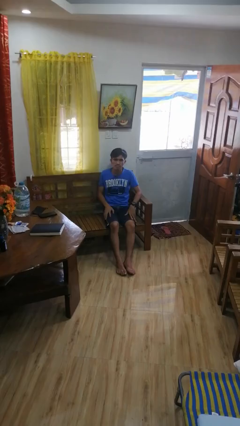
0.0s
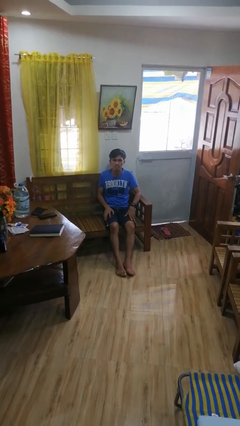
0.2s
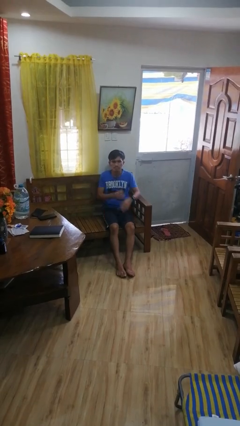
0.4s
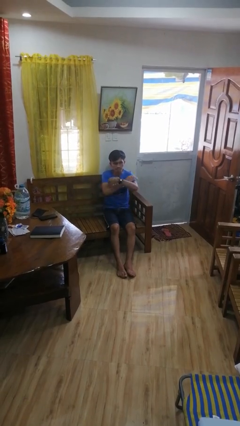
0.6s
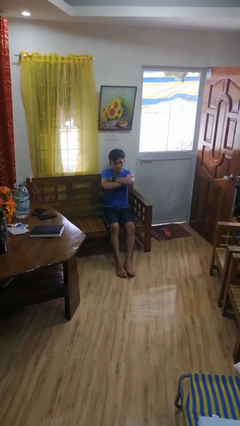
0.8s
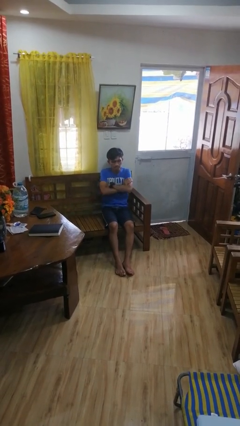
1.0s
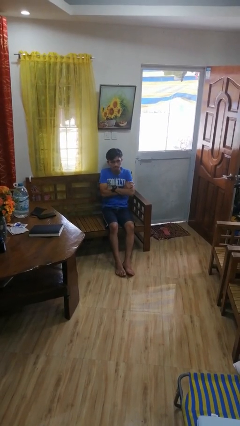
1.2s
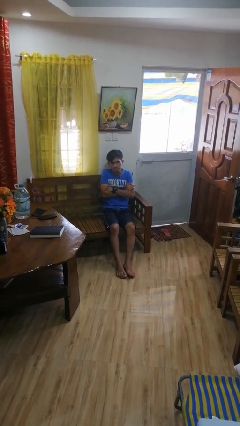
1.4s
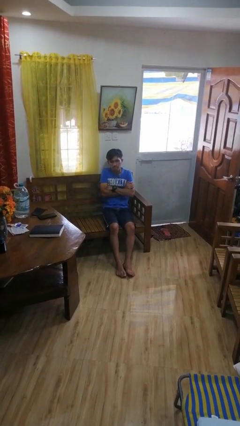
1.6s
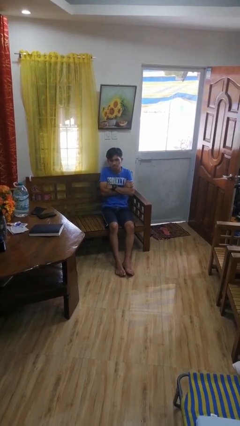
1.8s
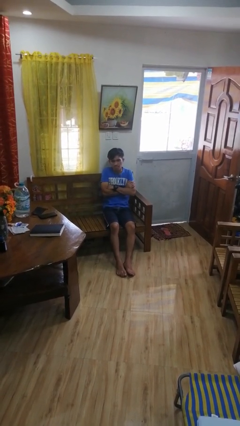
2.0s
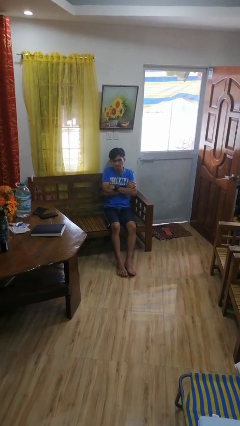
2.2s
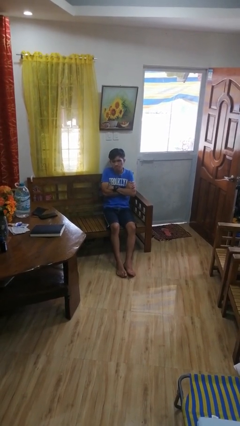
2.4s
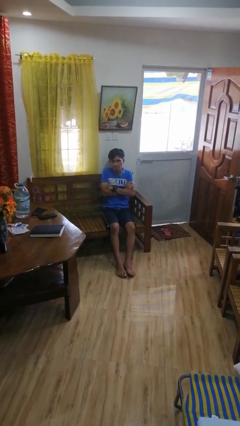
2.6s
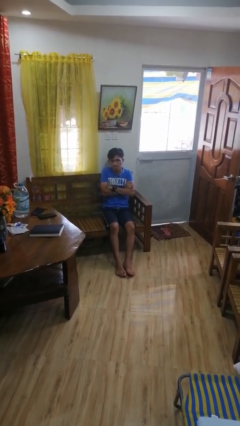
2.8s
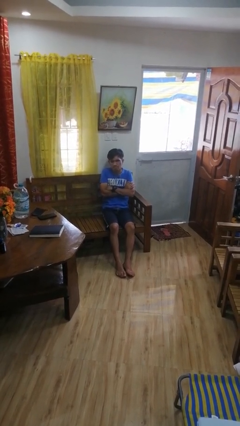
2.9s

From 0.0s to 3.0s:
person crosses arms

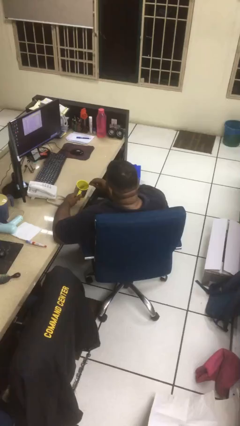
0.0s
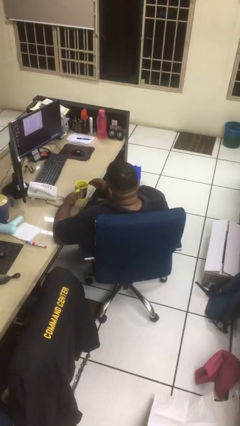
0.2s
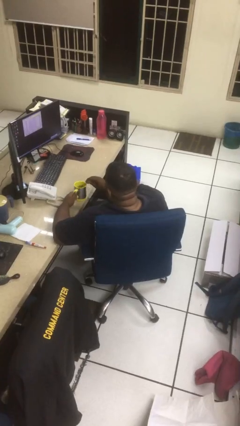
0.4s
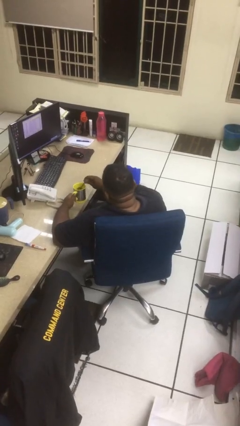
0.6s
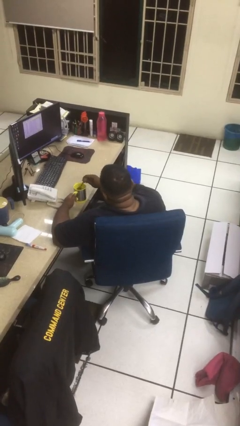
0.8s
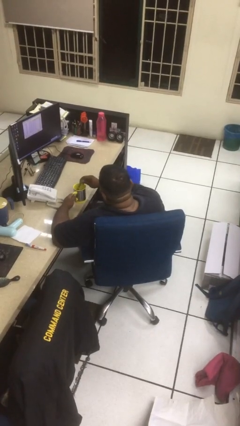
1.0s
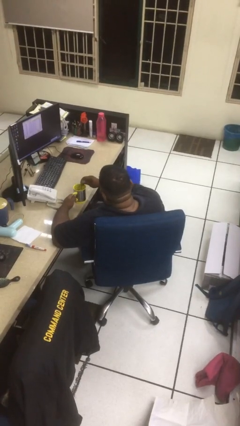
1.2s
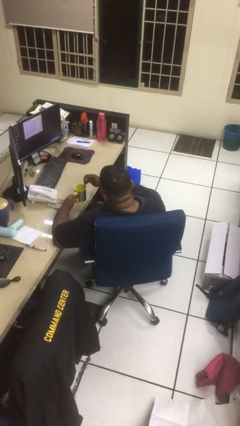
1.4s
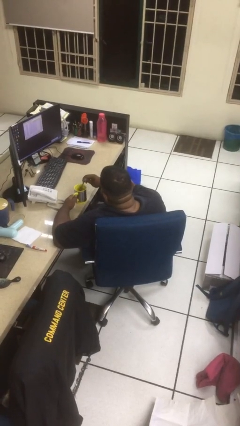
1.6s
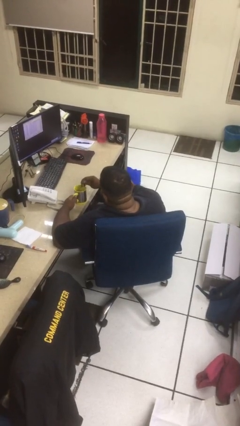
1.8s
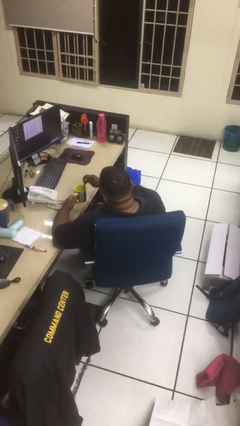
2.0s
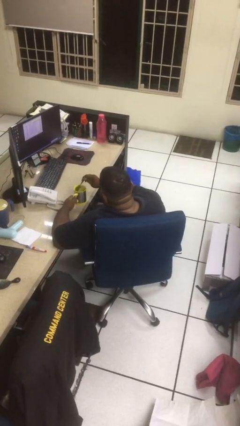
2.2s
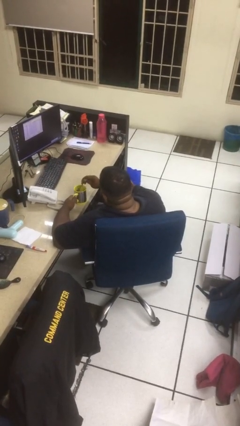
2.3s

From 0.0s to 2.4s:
person stirs mug

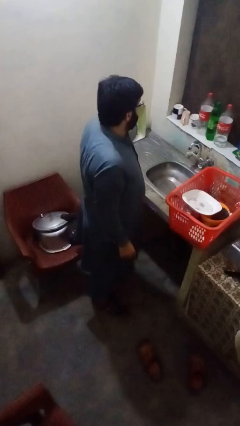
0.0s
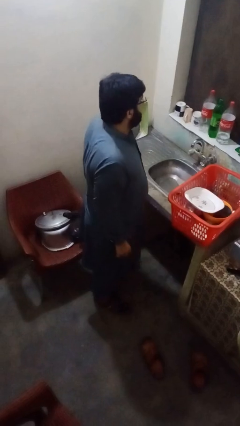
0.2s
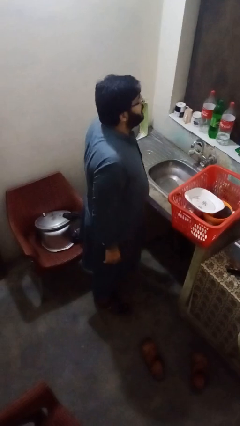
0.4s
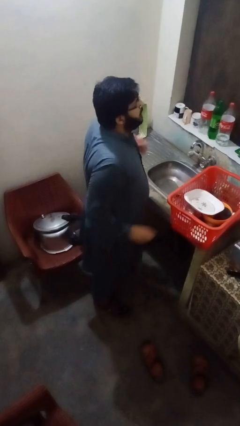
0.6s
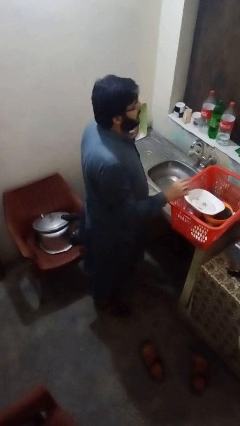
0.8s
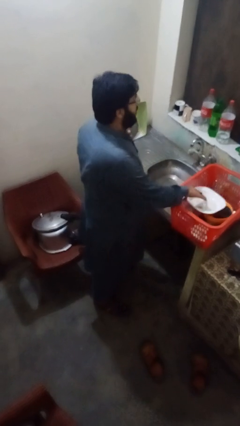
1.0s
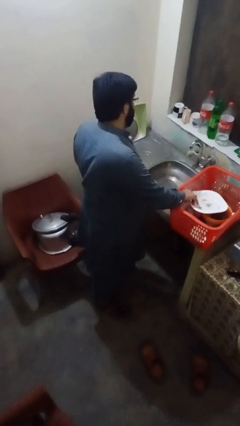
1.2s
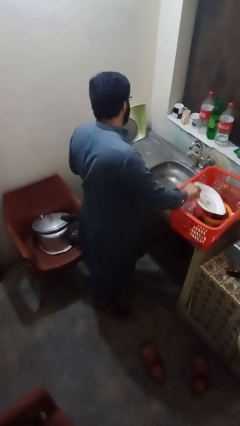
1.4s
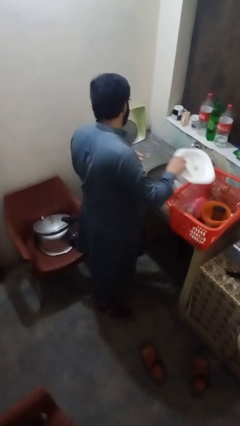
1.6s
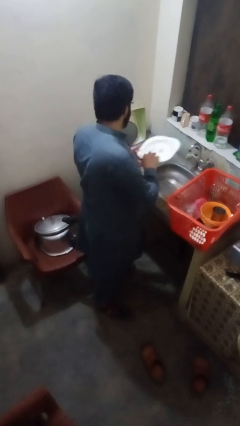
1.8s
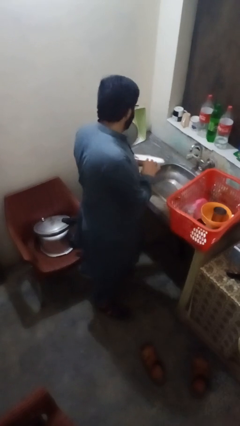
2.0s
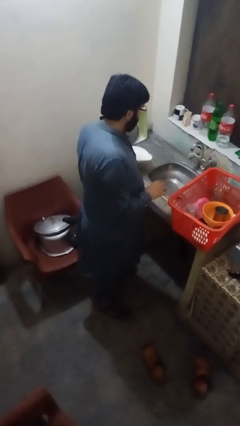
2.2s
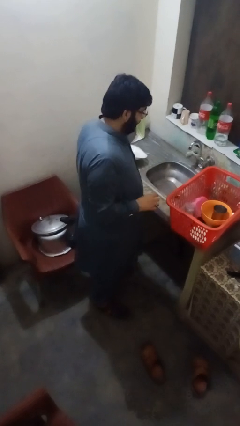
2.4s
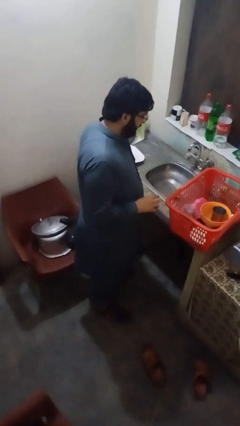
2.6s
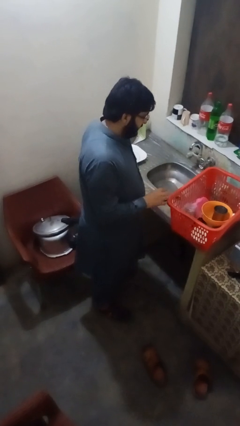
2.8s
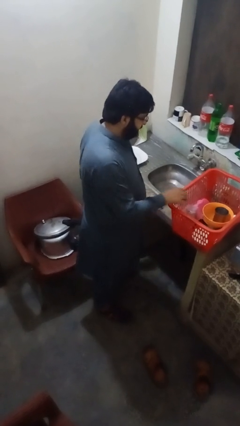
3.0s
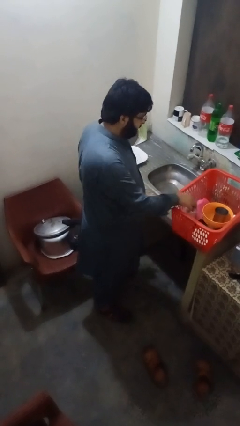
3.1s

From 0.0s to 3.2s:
person unloads dishwasher

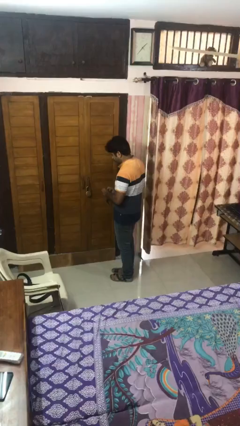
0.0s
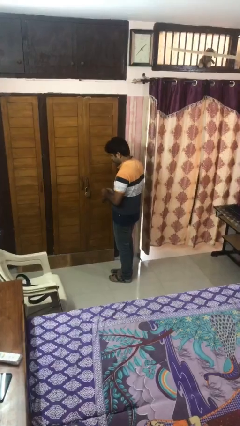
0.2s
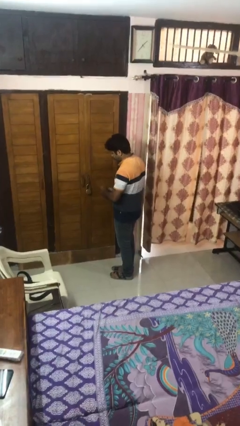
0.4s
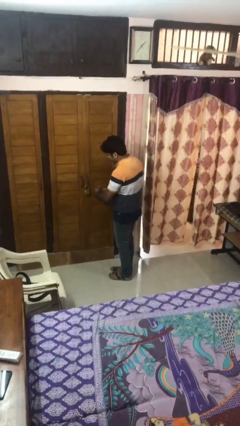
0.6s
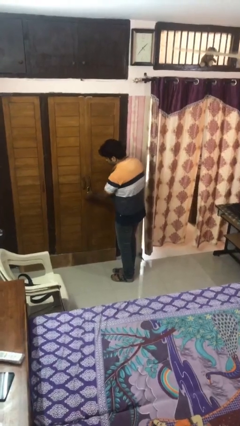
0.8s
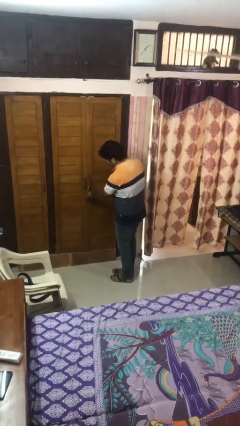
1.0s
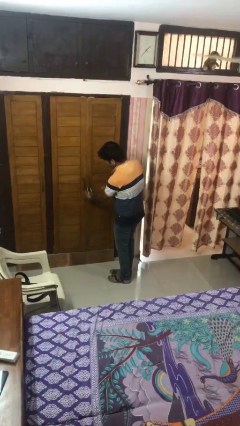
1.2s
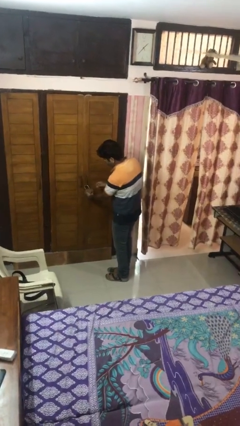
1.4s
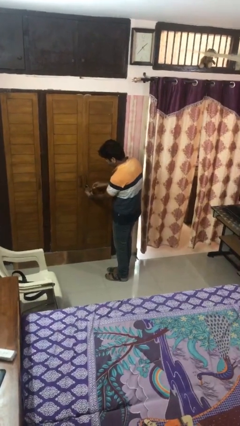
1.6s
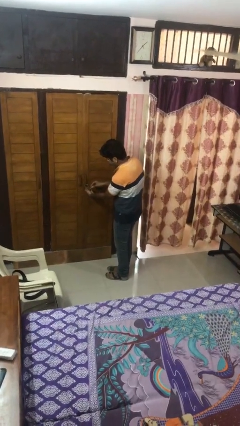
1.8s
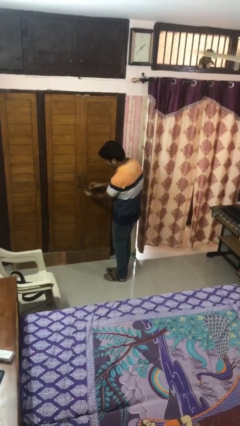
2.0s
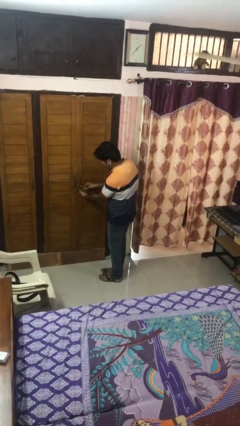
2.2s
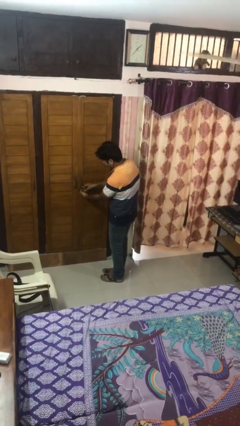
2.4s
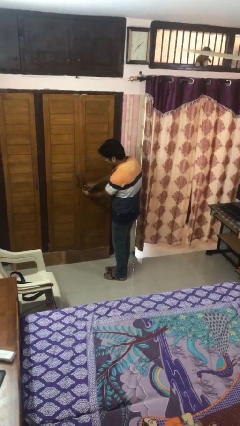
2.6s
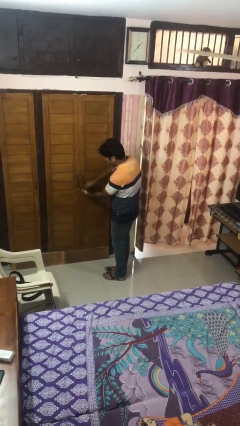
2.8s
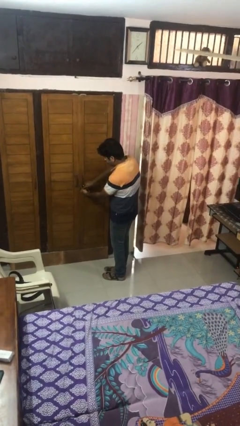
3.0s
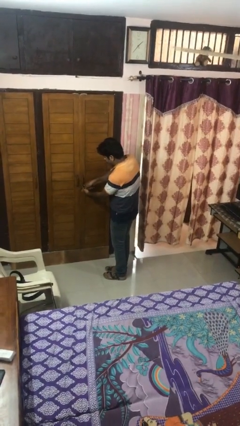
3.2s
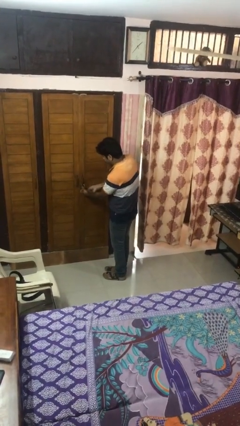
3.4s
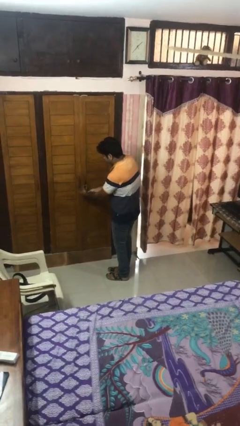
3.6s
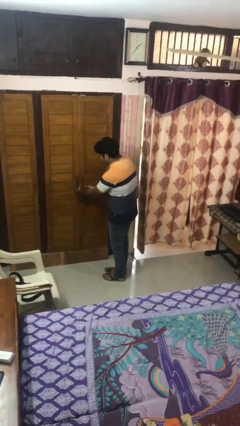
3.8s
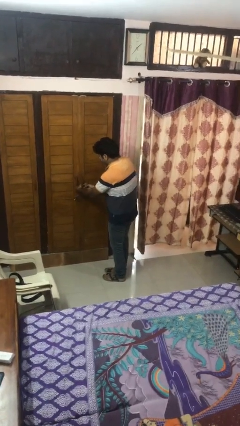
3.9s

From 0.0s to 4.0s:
person unlocks door with keys

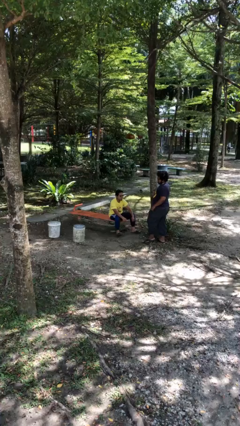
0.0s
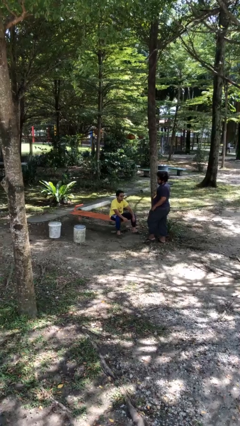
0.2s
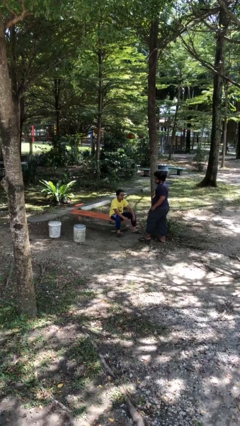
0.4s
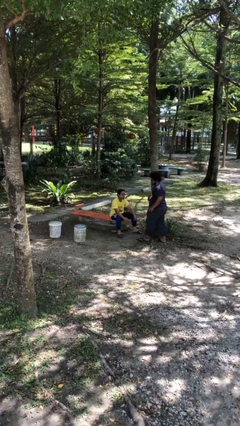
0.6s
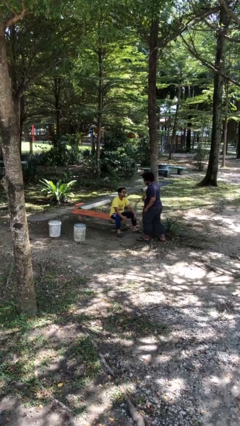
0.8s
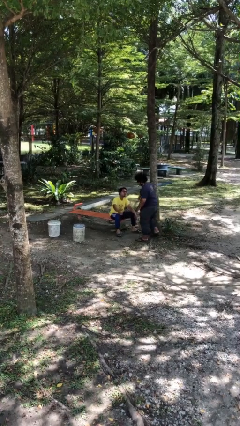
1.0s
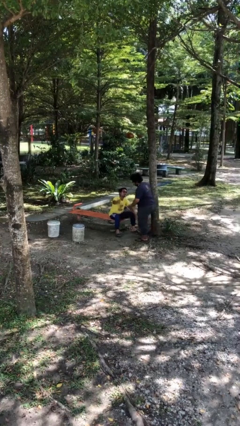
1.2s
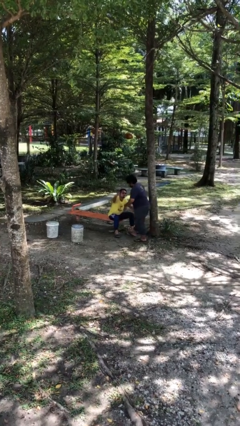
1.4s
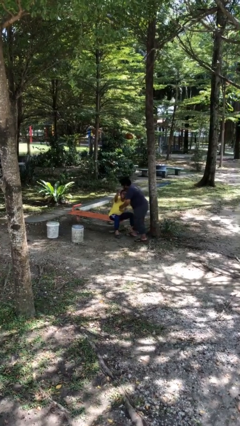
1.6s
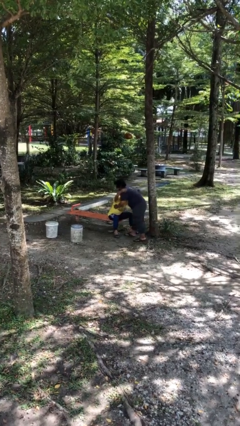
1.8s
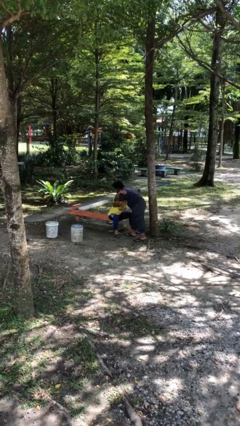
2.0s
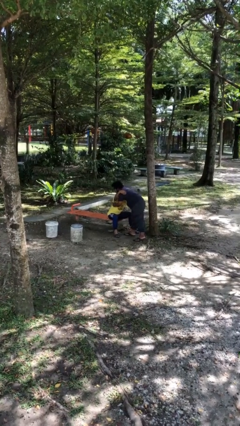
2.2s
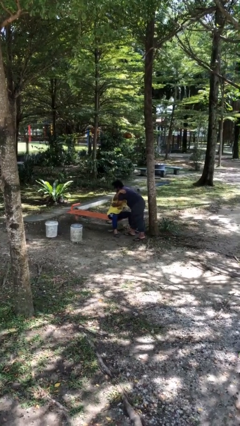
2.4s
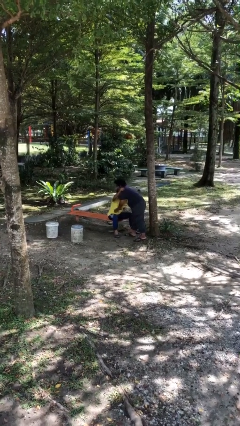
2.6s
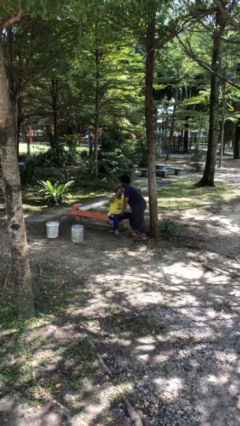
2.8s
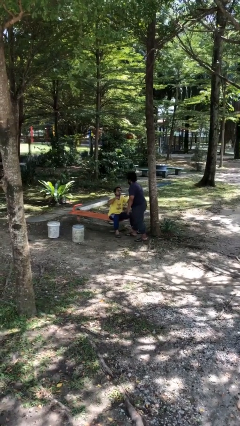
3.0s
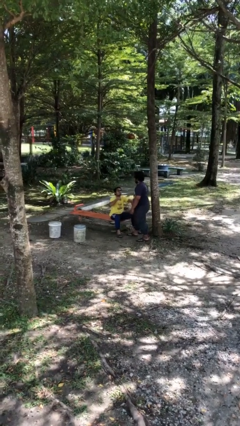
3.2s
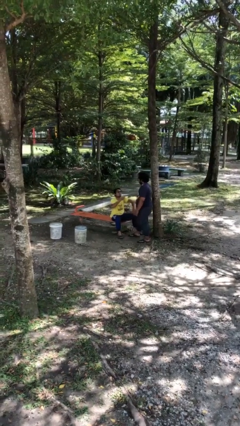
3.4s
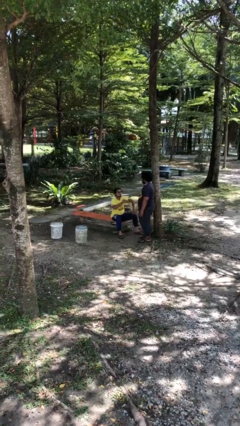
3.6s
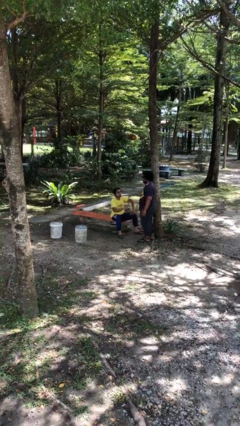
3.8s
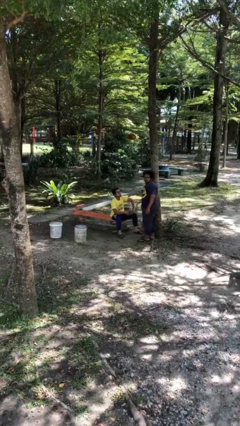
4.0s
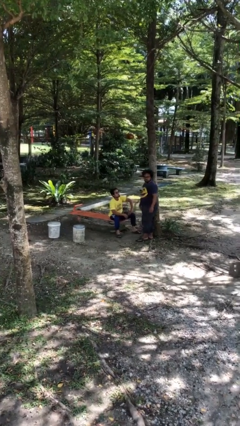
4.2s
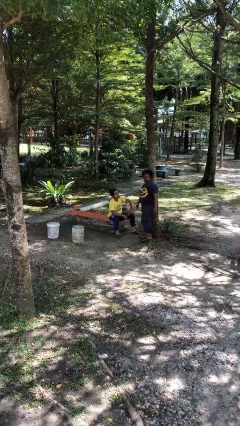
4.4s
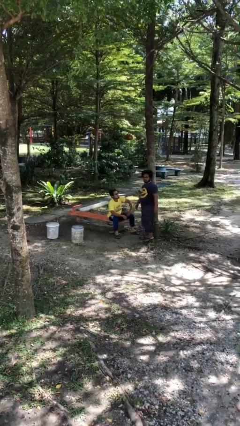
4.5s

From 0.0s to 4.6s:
person embraces person

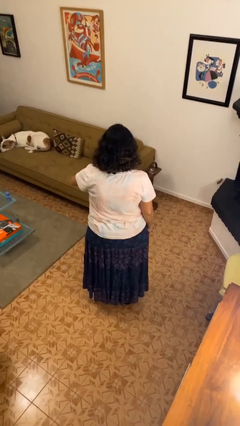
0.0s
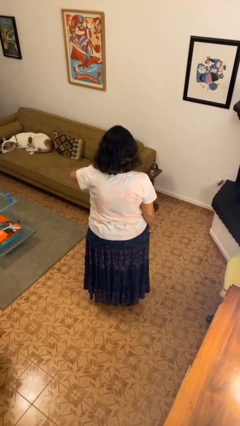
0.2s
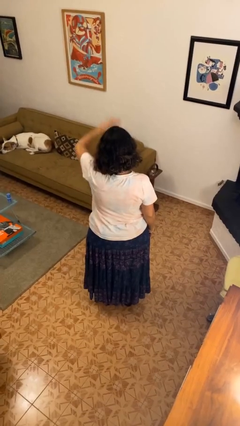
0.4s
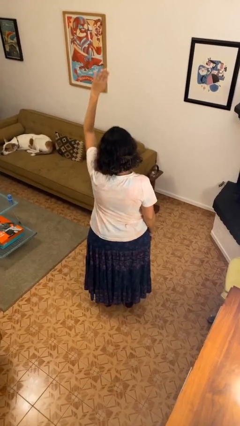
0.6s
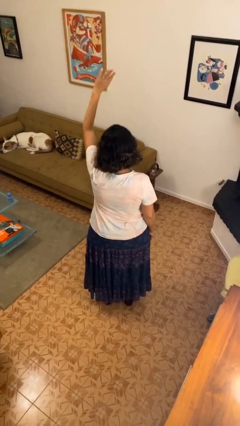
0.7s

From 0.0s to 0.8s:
person gestures swipe up
